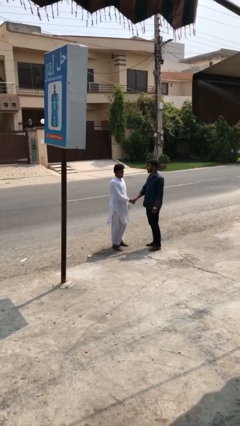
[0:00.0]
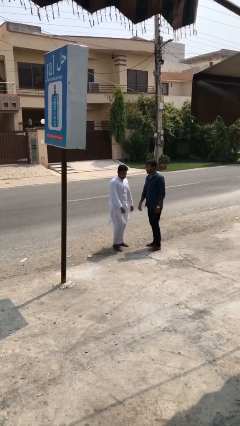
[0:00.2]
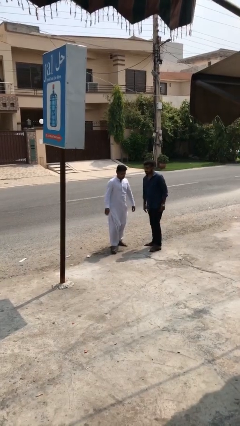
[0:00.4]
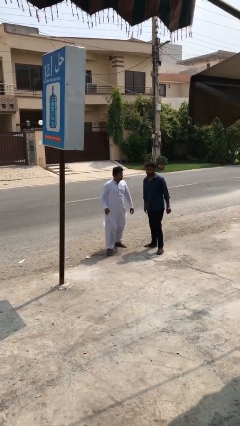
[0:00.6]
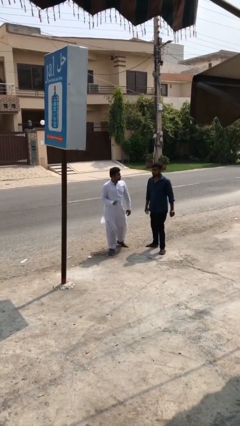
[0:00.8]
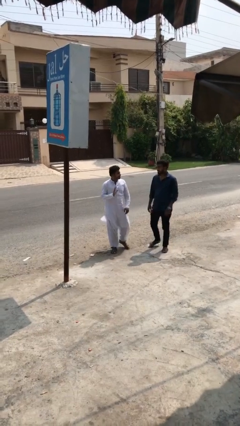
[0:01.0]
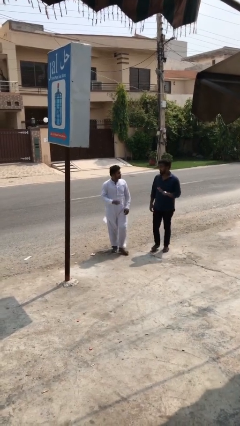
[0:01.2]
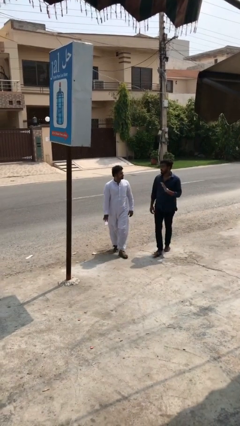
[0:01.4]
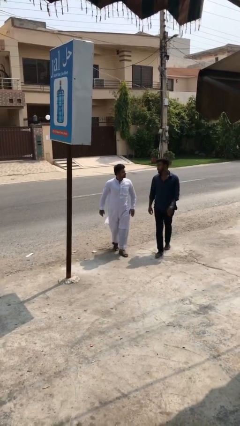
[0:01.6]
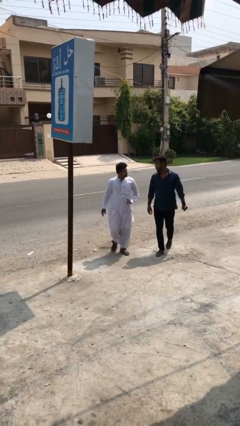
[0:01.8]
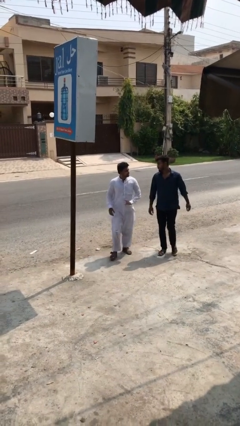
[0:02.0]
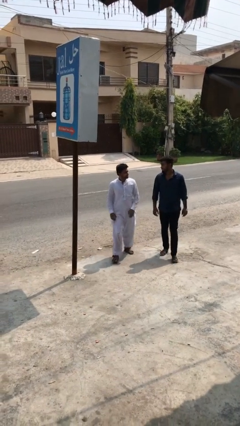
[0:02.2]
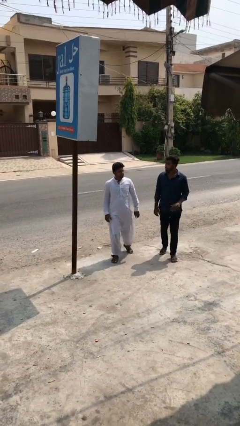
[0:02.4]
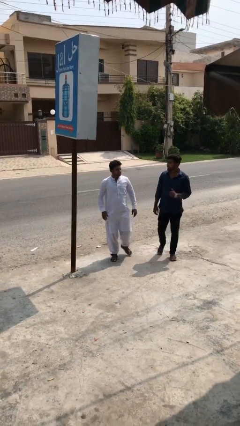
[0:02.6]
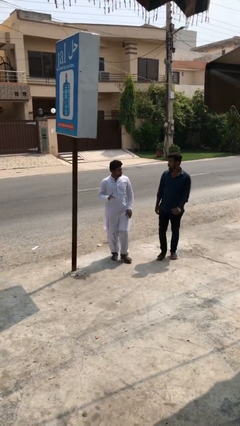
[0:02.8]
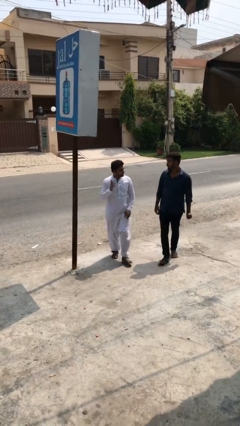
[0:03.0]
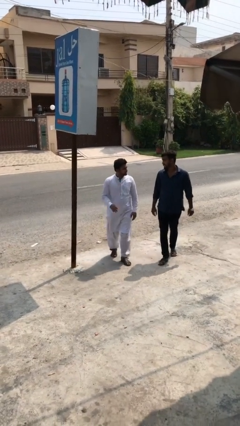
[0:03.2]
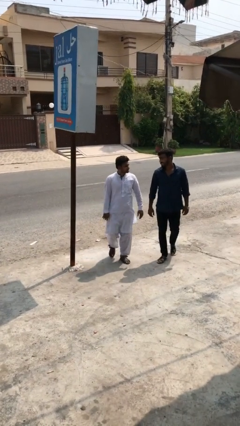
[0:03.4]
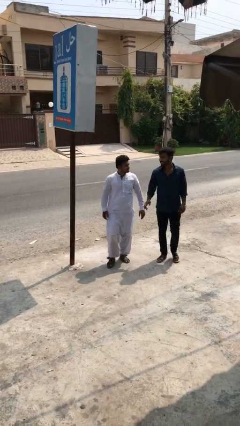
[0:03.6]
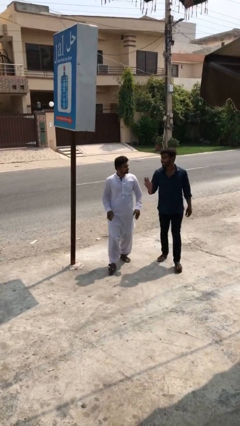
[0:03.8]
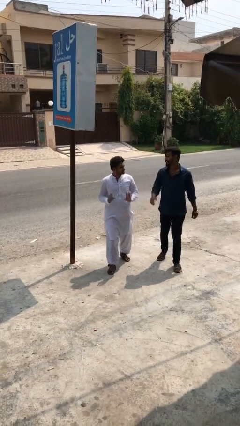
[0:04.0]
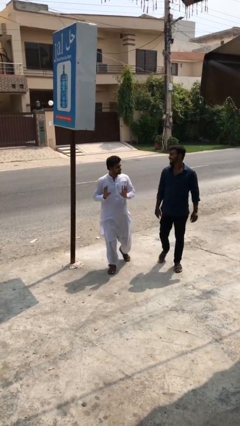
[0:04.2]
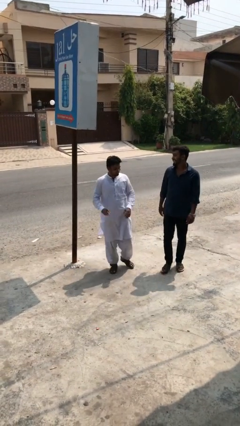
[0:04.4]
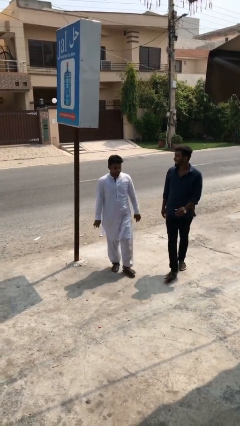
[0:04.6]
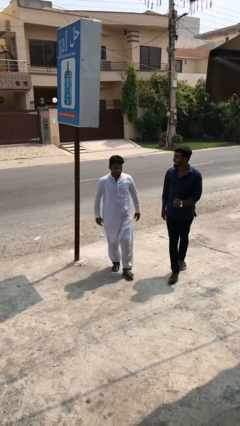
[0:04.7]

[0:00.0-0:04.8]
person talks to person

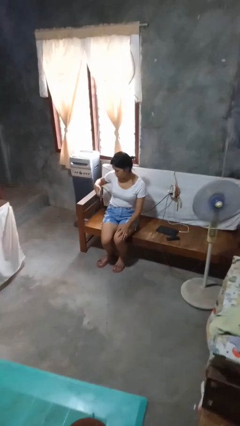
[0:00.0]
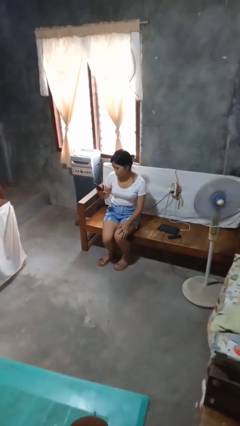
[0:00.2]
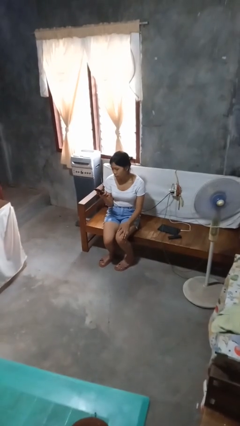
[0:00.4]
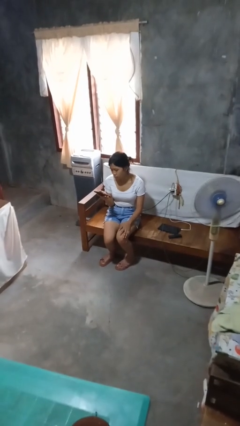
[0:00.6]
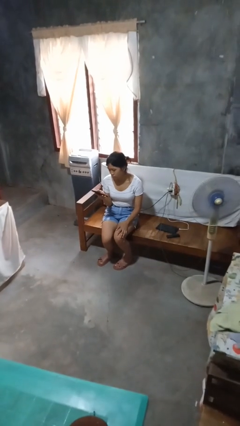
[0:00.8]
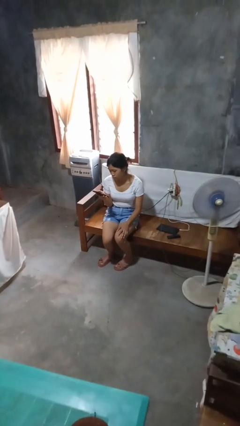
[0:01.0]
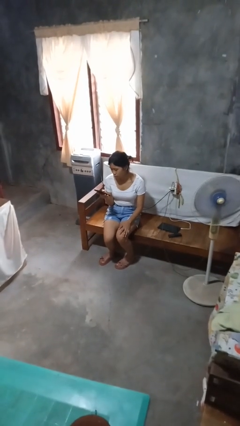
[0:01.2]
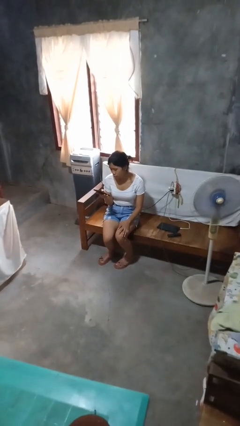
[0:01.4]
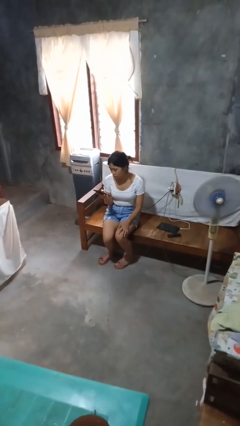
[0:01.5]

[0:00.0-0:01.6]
person takes phone from pocket

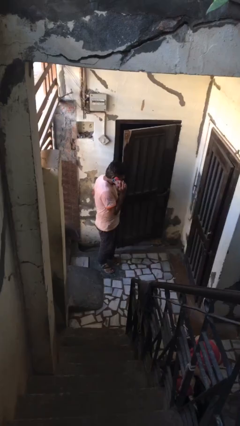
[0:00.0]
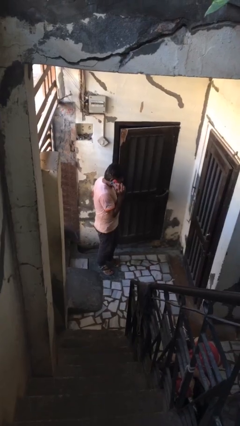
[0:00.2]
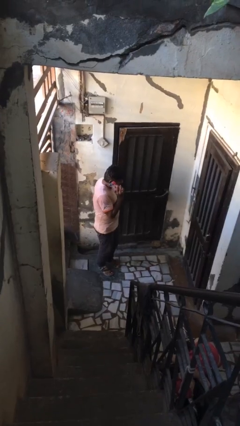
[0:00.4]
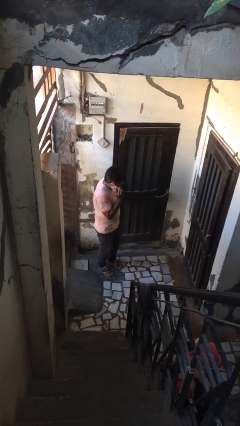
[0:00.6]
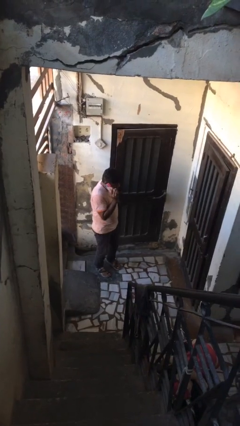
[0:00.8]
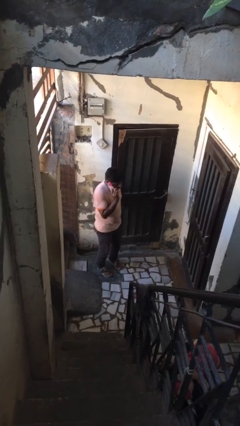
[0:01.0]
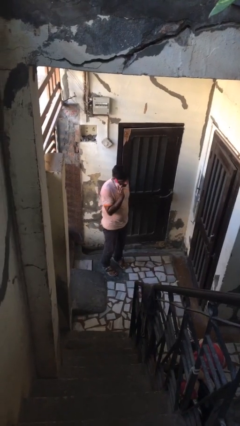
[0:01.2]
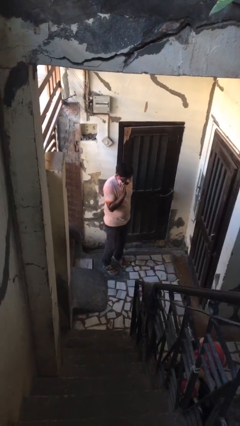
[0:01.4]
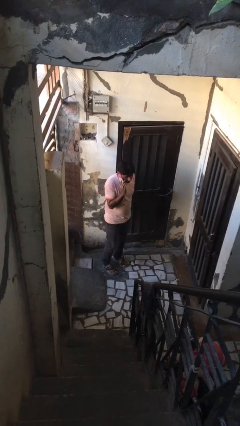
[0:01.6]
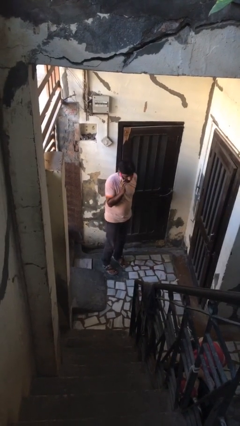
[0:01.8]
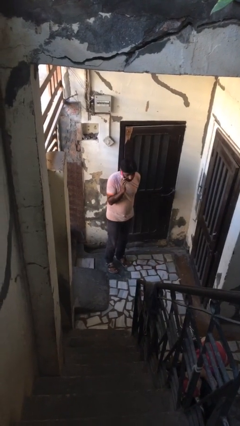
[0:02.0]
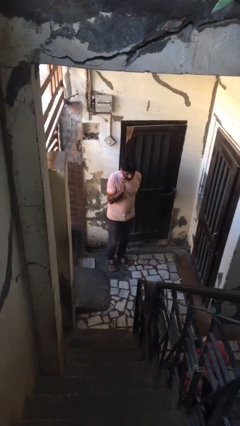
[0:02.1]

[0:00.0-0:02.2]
person closes facility door

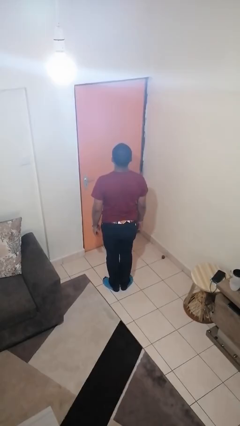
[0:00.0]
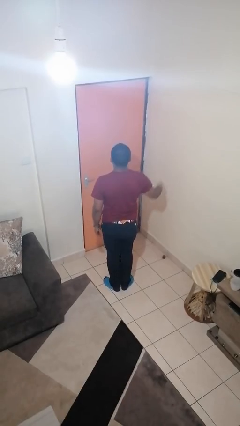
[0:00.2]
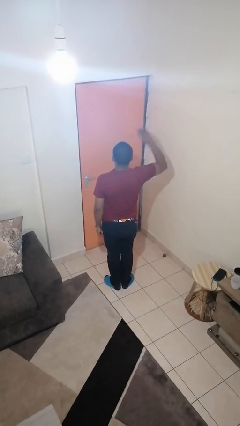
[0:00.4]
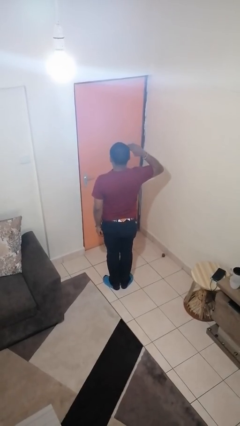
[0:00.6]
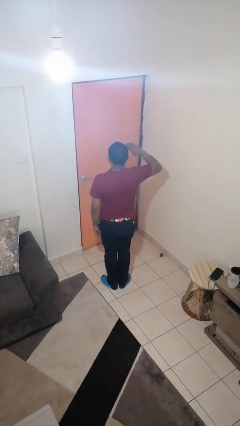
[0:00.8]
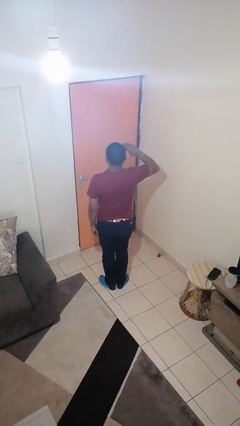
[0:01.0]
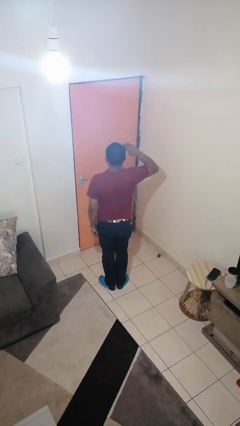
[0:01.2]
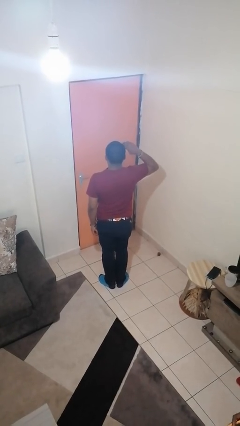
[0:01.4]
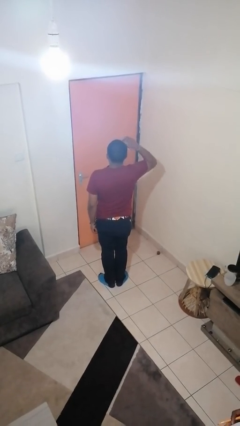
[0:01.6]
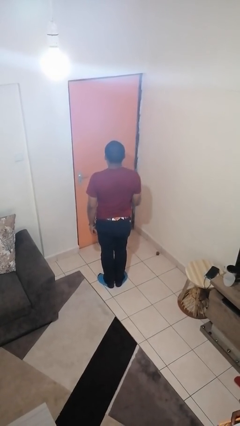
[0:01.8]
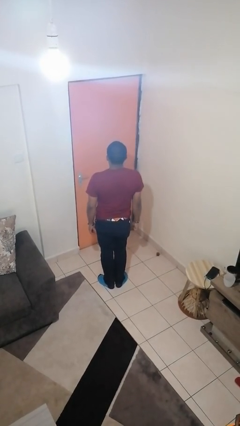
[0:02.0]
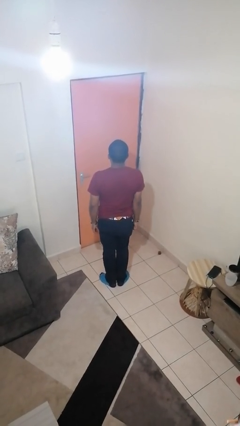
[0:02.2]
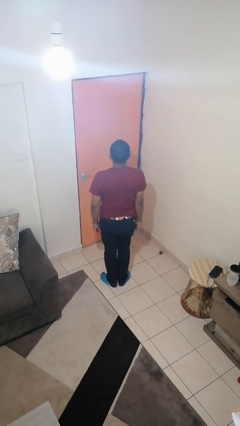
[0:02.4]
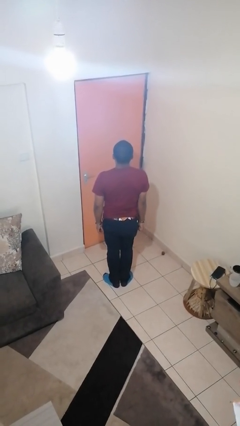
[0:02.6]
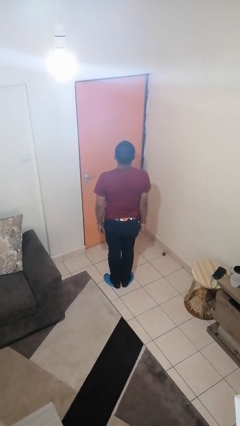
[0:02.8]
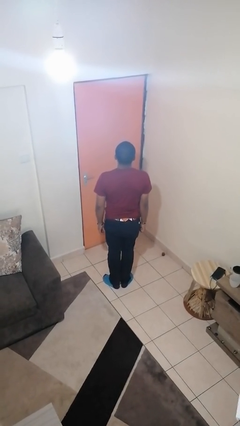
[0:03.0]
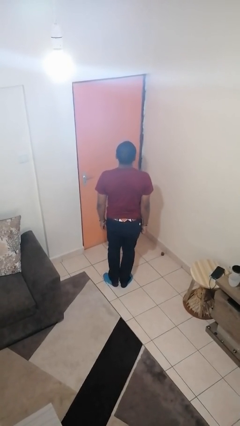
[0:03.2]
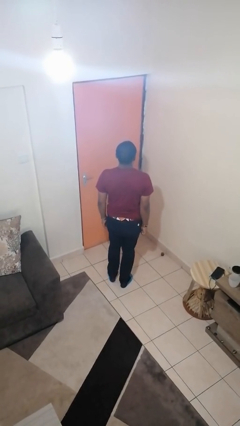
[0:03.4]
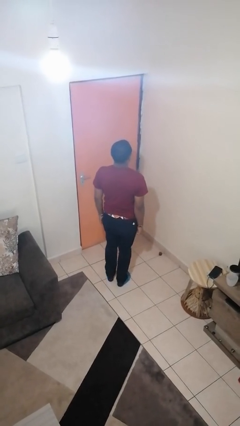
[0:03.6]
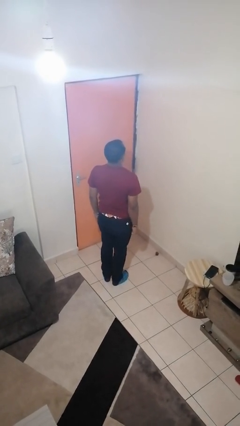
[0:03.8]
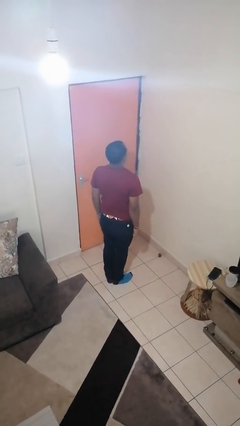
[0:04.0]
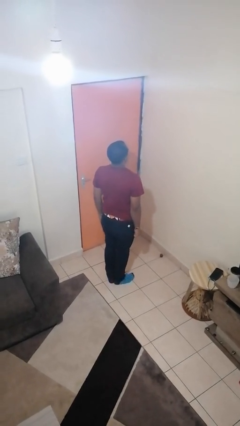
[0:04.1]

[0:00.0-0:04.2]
person salutes

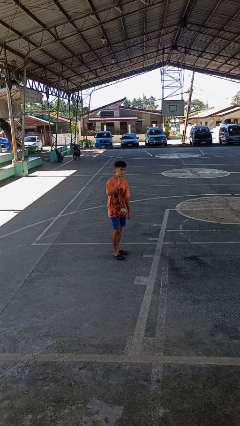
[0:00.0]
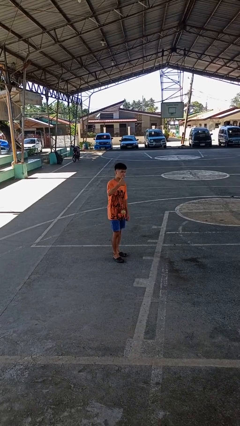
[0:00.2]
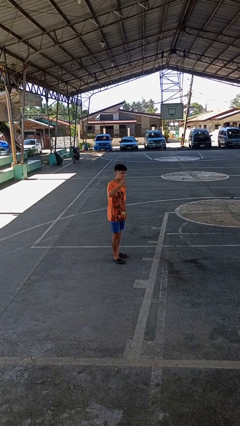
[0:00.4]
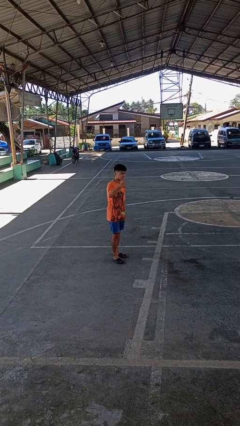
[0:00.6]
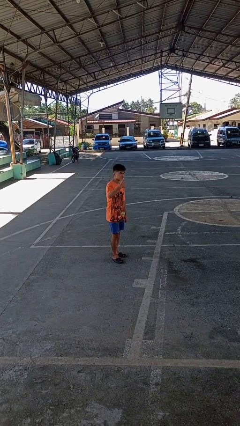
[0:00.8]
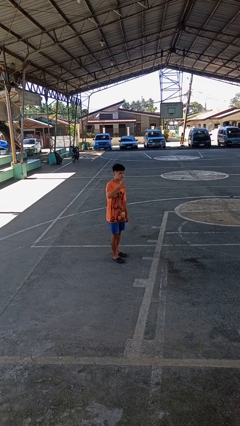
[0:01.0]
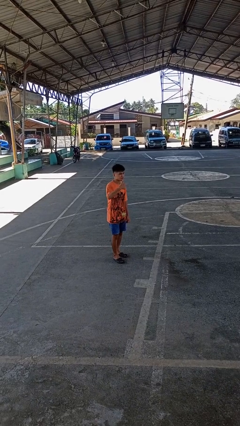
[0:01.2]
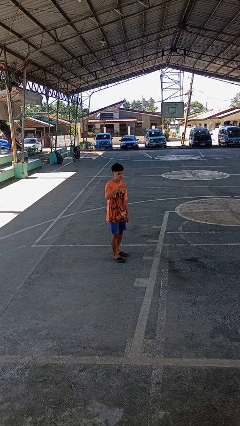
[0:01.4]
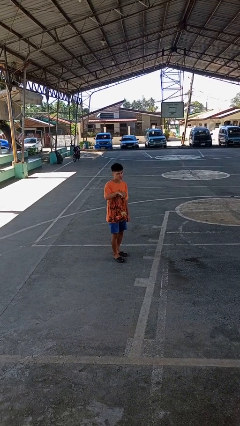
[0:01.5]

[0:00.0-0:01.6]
person gestures thumbs up

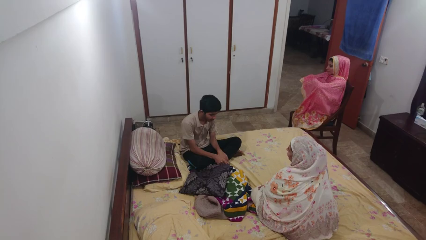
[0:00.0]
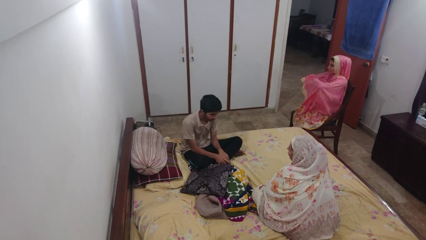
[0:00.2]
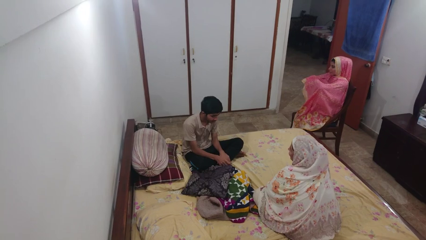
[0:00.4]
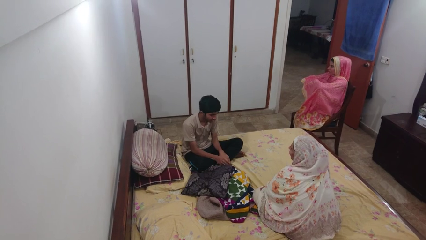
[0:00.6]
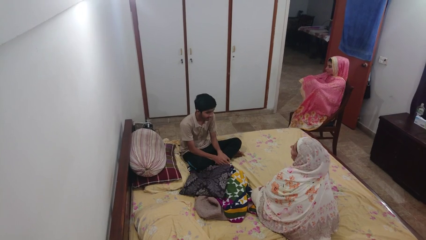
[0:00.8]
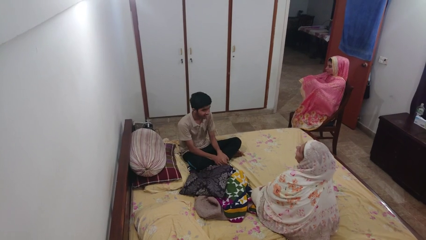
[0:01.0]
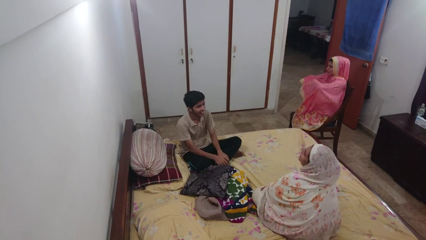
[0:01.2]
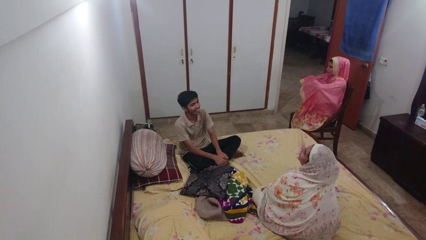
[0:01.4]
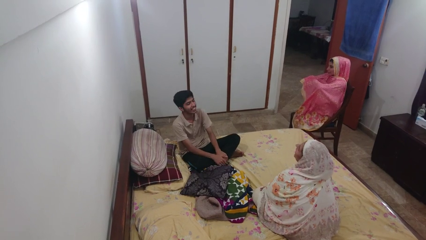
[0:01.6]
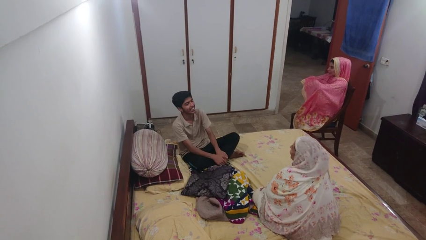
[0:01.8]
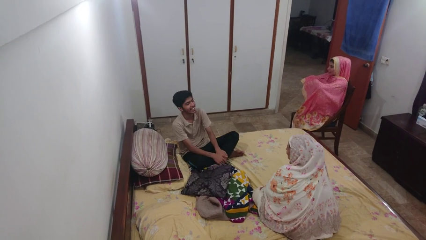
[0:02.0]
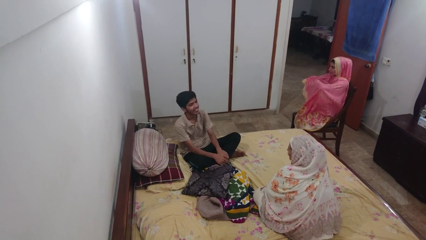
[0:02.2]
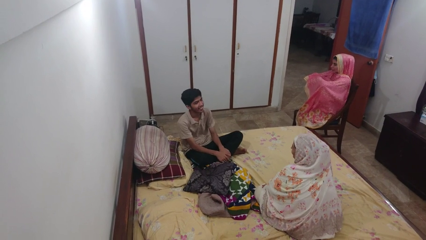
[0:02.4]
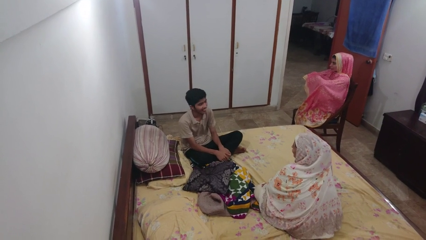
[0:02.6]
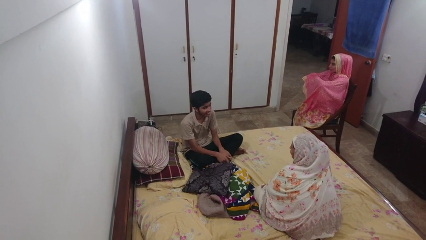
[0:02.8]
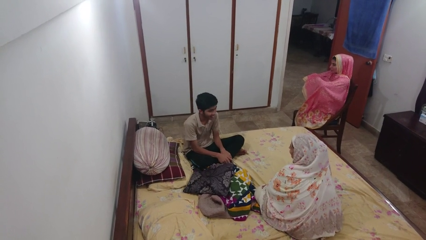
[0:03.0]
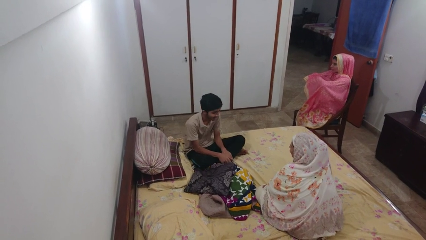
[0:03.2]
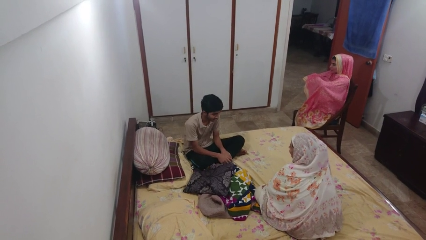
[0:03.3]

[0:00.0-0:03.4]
person laughs with person
